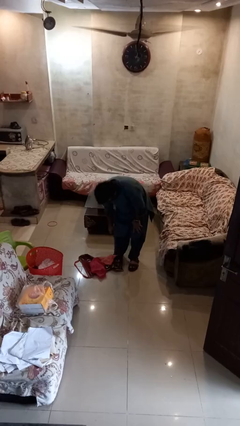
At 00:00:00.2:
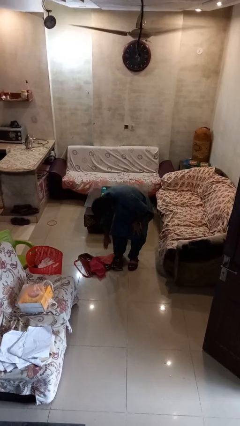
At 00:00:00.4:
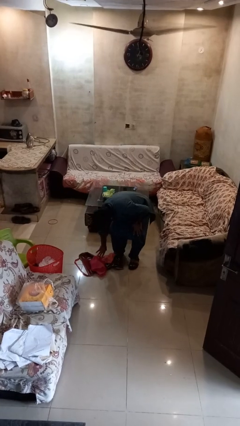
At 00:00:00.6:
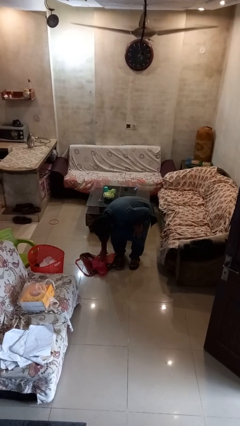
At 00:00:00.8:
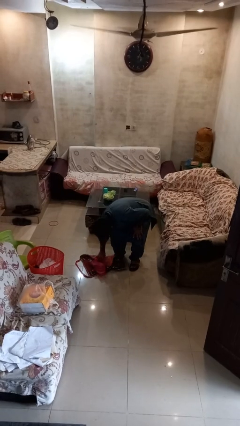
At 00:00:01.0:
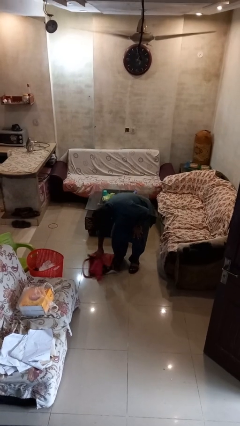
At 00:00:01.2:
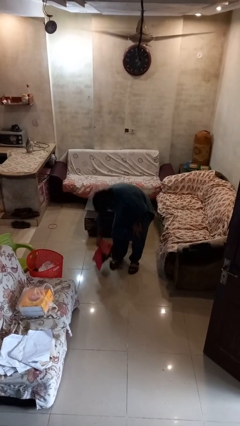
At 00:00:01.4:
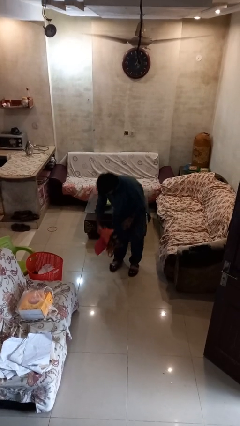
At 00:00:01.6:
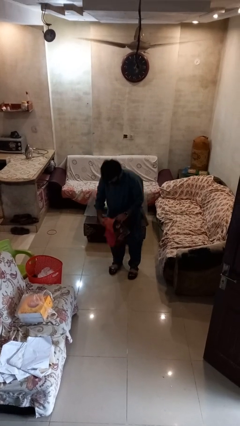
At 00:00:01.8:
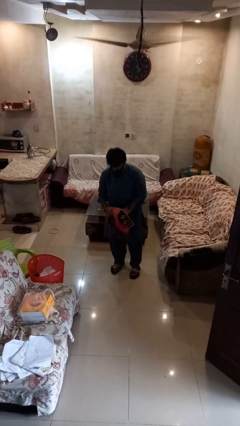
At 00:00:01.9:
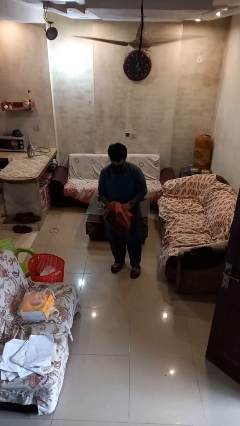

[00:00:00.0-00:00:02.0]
person picks up object from floor

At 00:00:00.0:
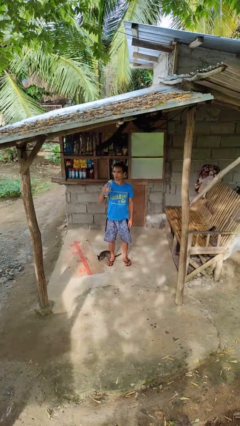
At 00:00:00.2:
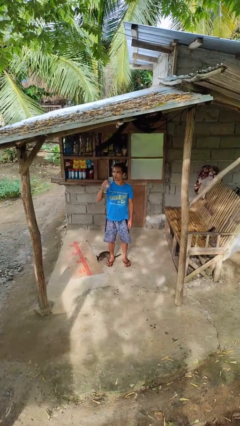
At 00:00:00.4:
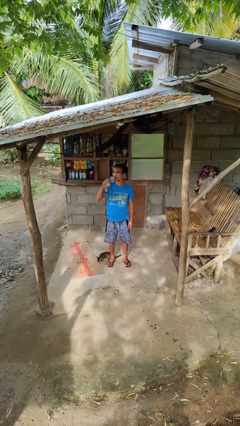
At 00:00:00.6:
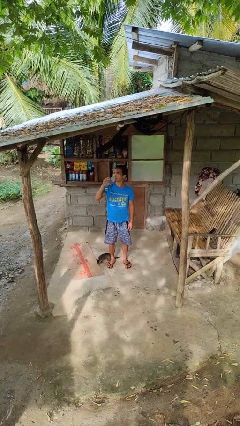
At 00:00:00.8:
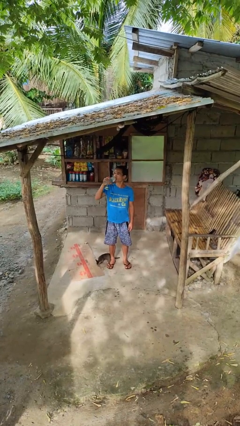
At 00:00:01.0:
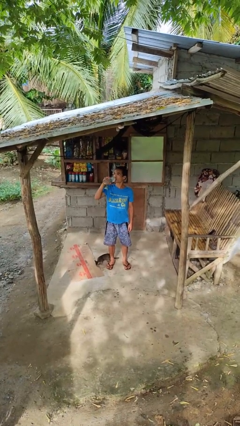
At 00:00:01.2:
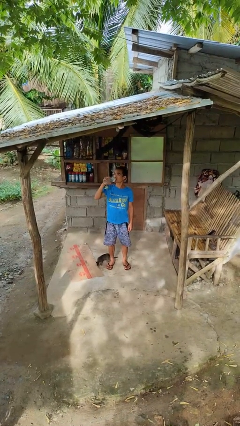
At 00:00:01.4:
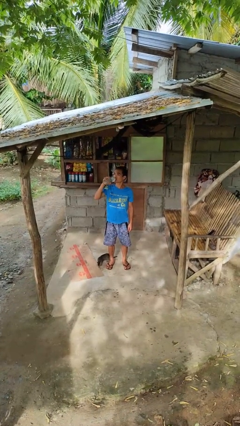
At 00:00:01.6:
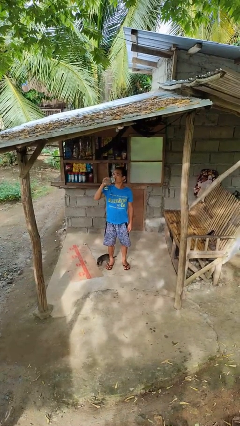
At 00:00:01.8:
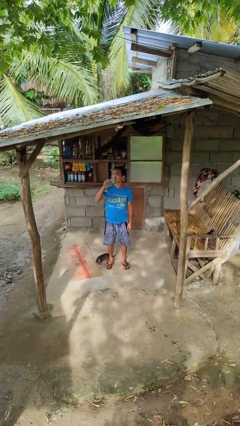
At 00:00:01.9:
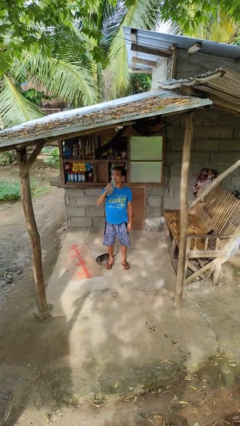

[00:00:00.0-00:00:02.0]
person drinks from bottle

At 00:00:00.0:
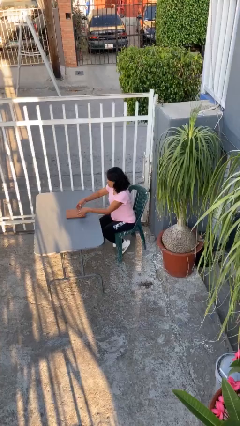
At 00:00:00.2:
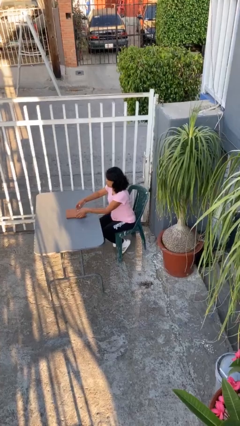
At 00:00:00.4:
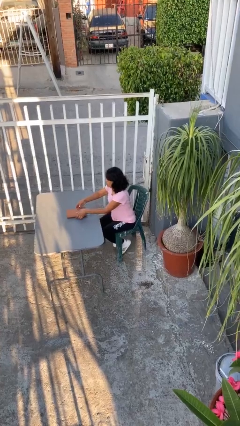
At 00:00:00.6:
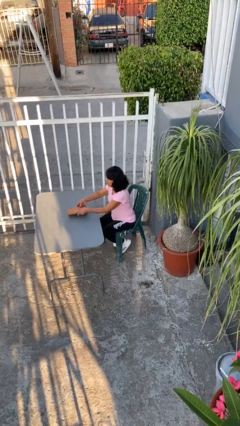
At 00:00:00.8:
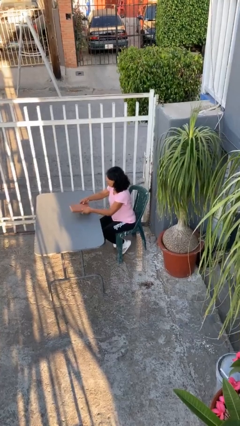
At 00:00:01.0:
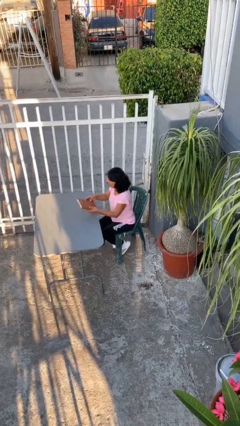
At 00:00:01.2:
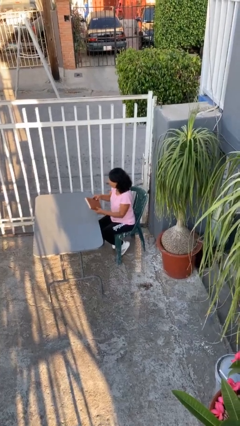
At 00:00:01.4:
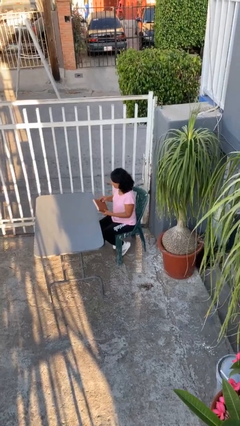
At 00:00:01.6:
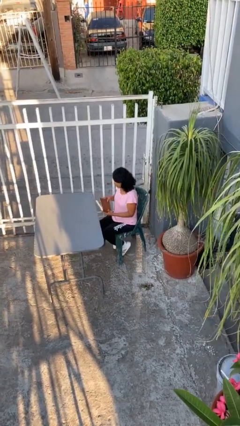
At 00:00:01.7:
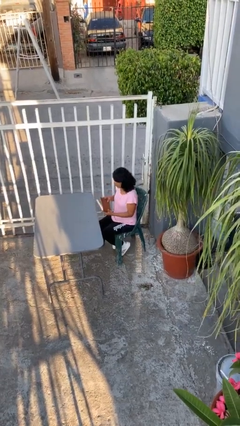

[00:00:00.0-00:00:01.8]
person picks up object from table

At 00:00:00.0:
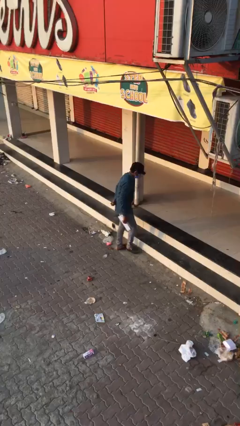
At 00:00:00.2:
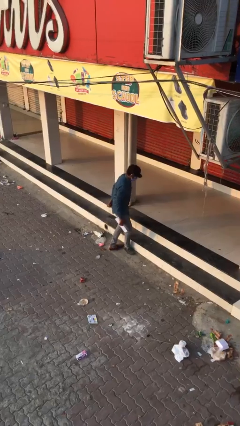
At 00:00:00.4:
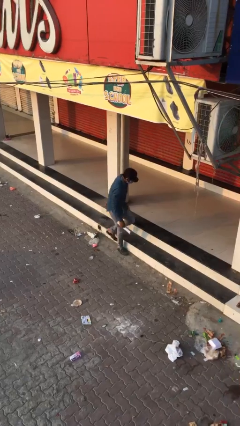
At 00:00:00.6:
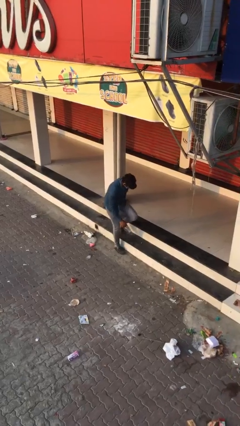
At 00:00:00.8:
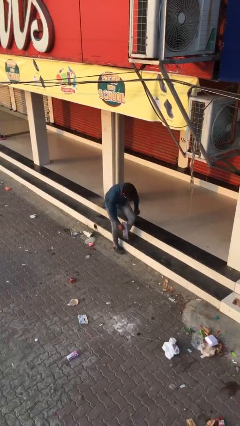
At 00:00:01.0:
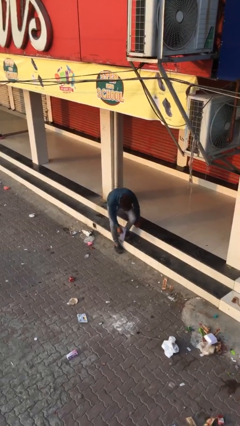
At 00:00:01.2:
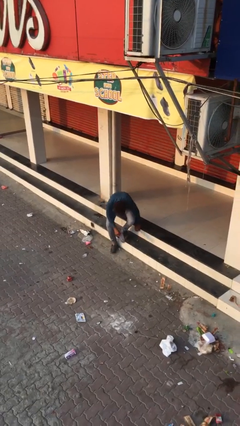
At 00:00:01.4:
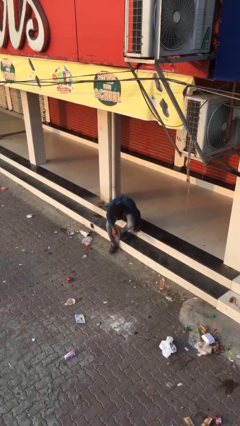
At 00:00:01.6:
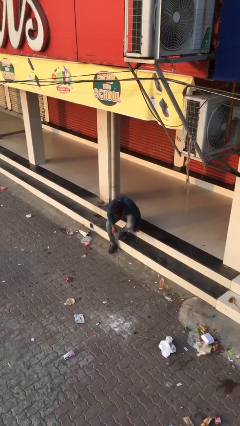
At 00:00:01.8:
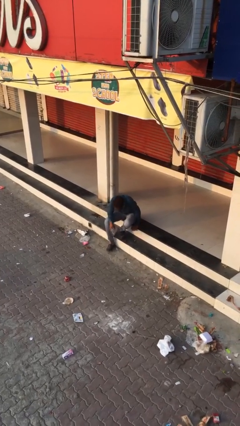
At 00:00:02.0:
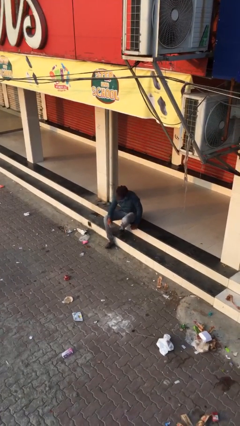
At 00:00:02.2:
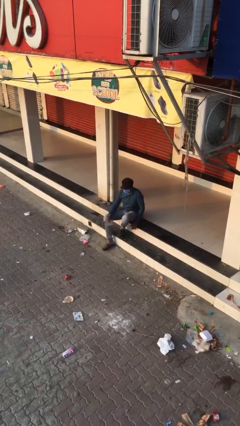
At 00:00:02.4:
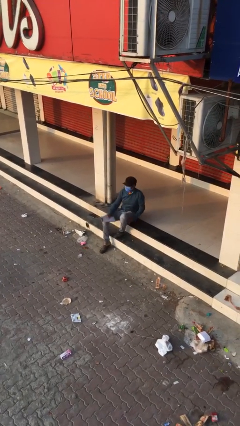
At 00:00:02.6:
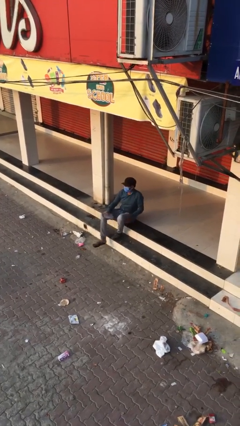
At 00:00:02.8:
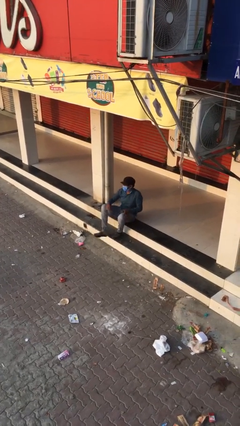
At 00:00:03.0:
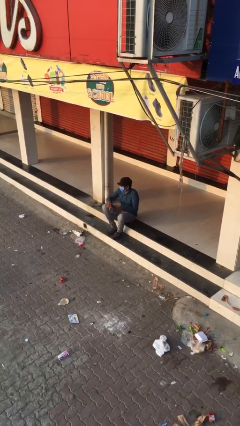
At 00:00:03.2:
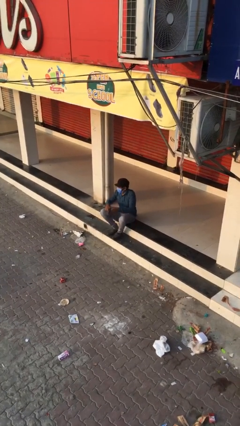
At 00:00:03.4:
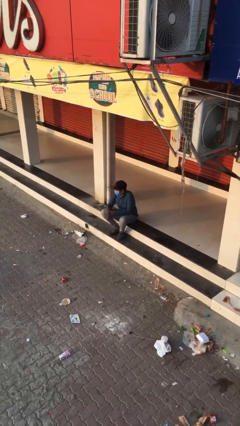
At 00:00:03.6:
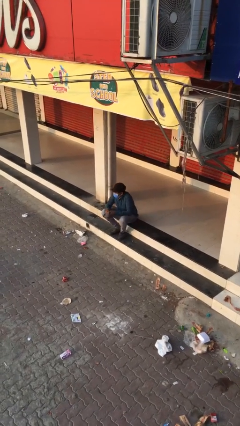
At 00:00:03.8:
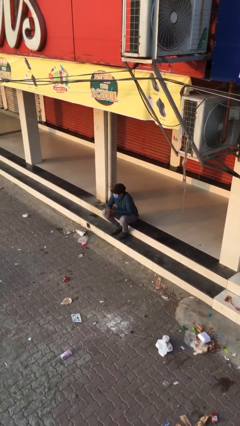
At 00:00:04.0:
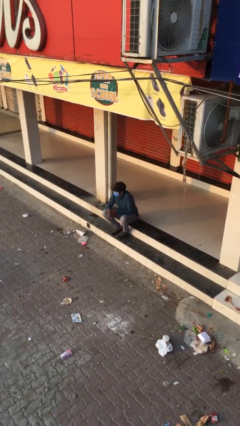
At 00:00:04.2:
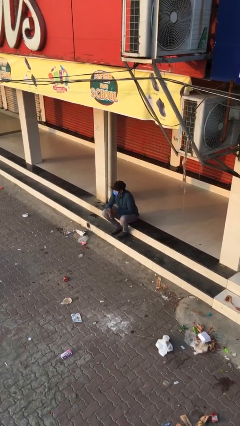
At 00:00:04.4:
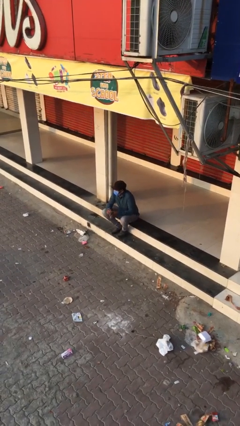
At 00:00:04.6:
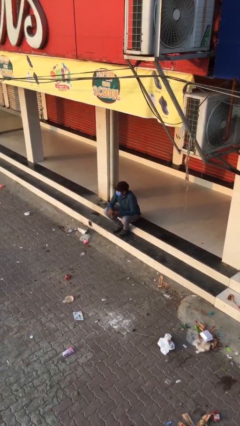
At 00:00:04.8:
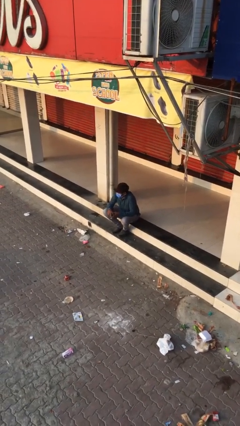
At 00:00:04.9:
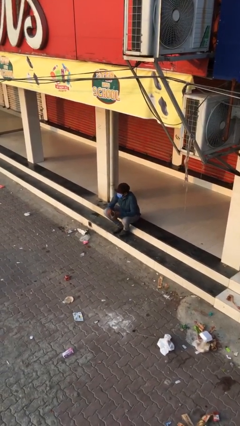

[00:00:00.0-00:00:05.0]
person sits down

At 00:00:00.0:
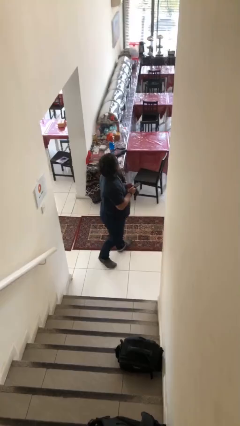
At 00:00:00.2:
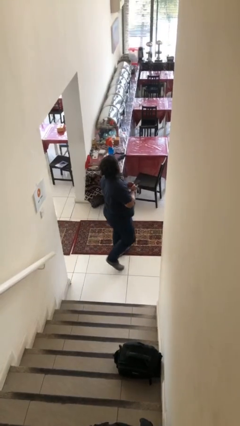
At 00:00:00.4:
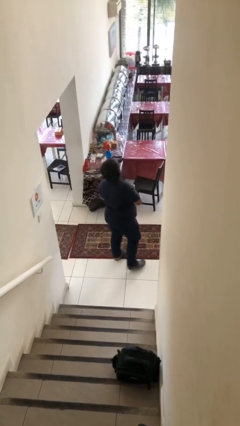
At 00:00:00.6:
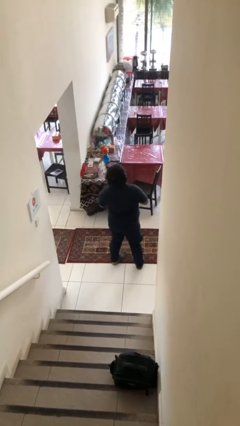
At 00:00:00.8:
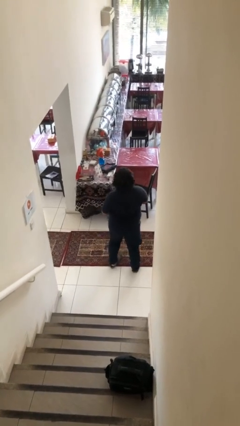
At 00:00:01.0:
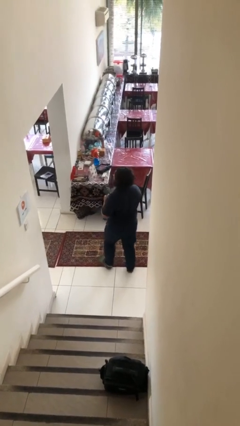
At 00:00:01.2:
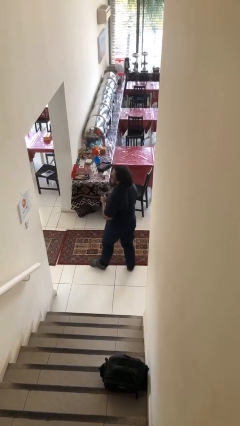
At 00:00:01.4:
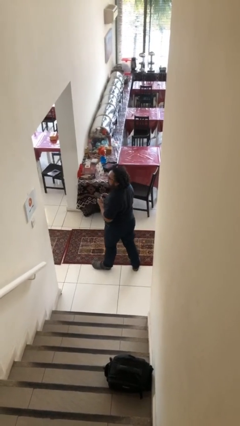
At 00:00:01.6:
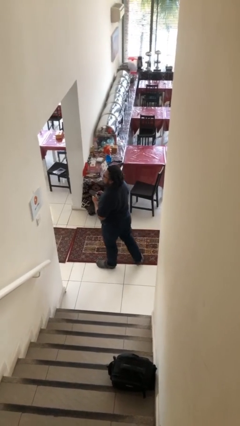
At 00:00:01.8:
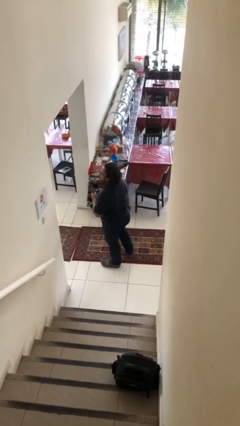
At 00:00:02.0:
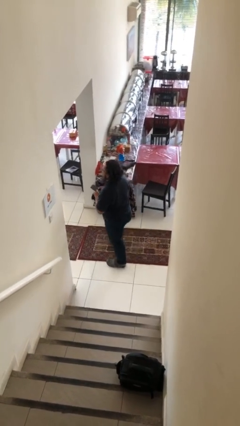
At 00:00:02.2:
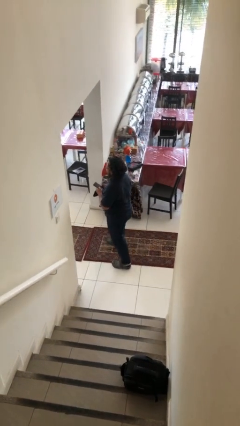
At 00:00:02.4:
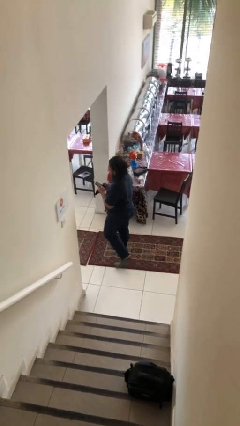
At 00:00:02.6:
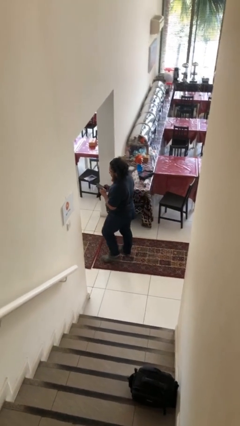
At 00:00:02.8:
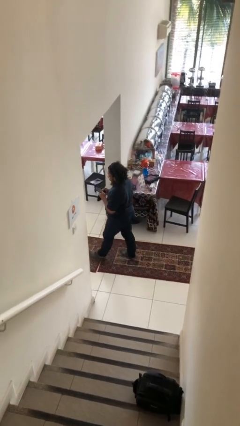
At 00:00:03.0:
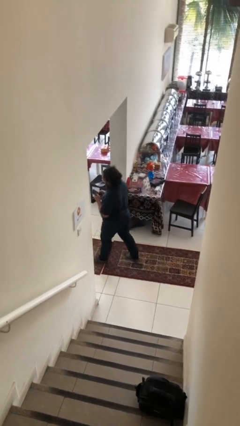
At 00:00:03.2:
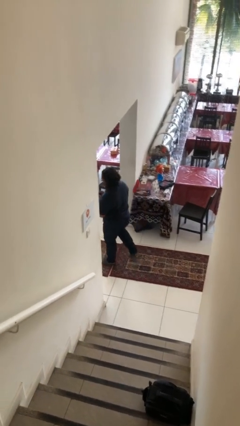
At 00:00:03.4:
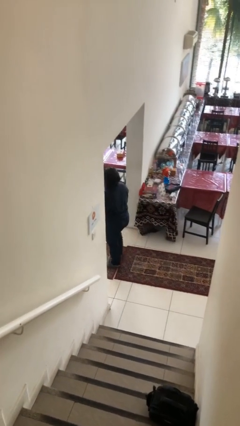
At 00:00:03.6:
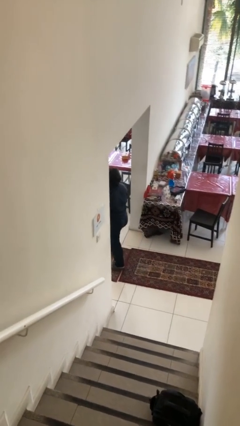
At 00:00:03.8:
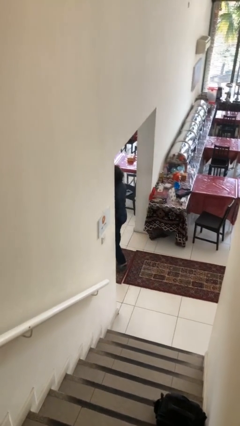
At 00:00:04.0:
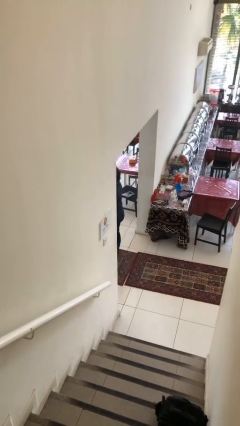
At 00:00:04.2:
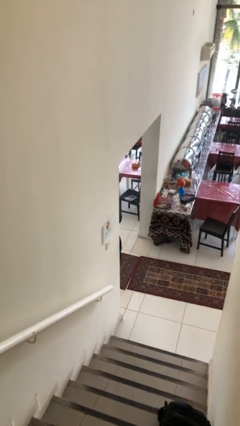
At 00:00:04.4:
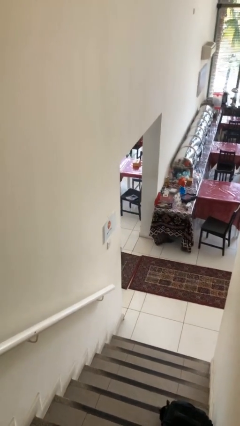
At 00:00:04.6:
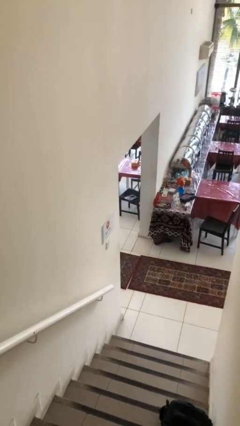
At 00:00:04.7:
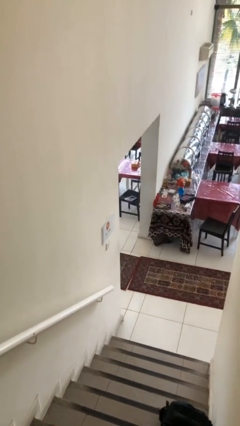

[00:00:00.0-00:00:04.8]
person exits scene through structure

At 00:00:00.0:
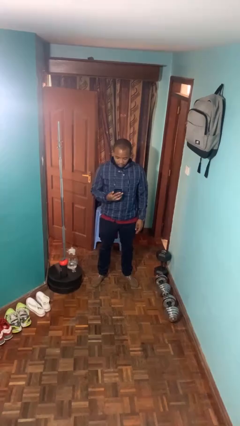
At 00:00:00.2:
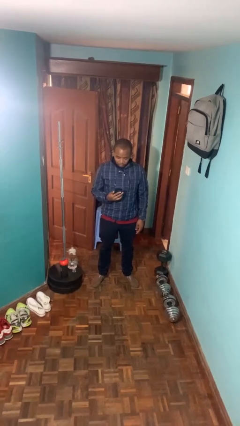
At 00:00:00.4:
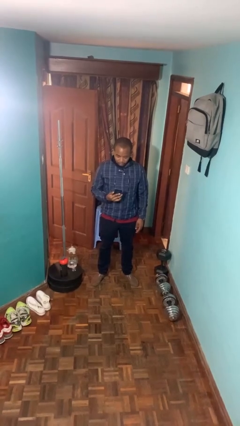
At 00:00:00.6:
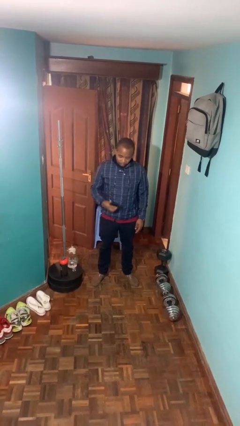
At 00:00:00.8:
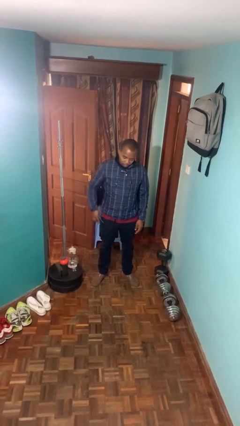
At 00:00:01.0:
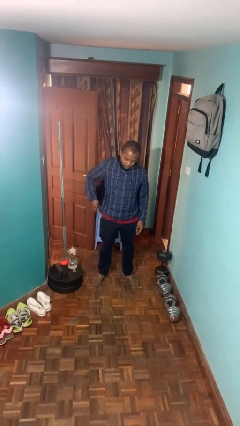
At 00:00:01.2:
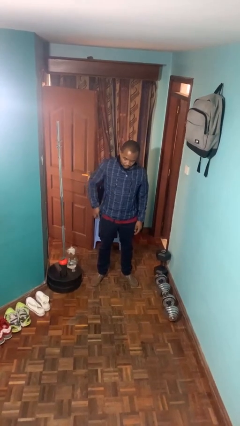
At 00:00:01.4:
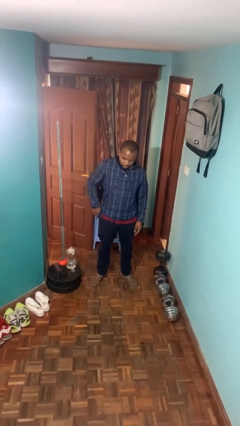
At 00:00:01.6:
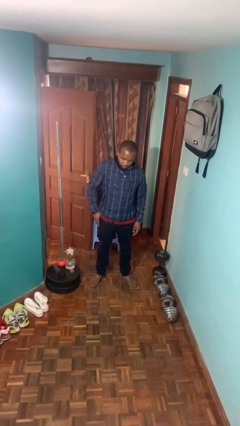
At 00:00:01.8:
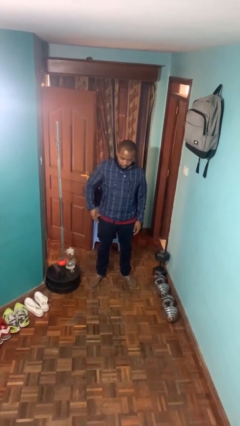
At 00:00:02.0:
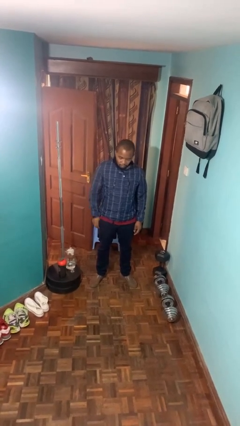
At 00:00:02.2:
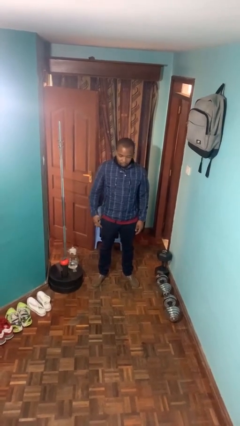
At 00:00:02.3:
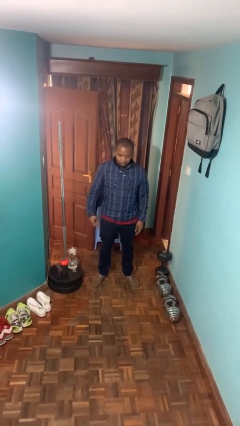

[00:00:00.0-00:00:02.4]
person puts phone into pocket
